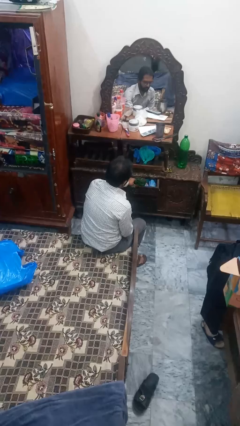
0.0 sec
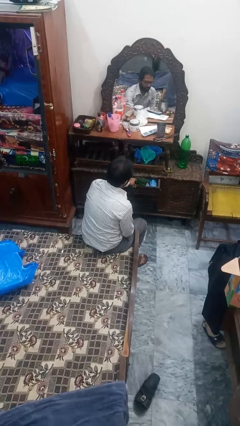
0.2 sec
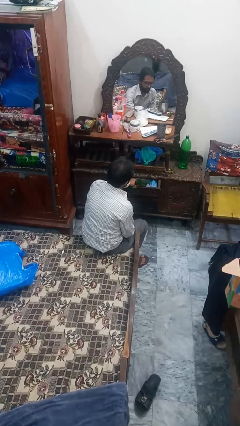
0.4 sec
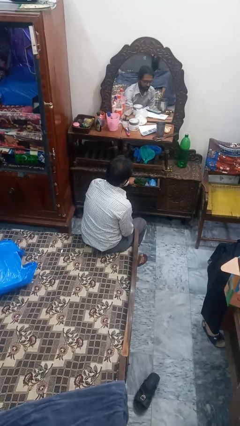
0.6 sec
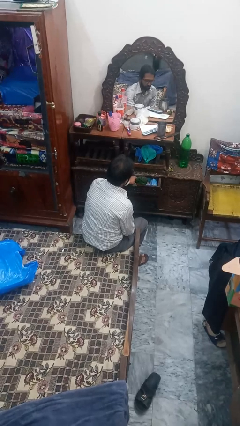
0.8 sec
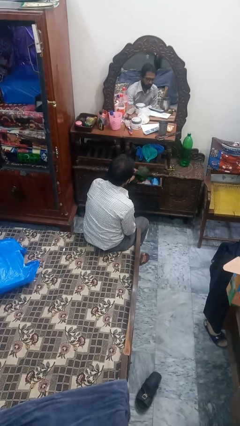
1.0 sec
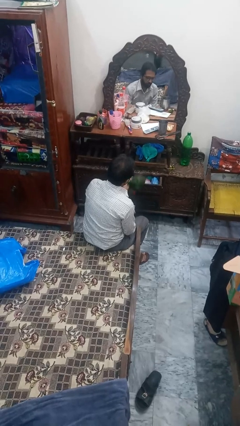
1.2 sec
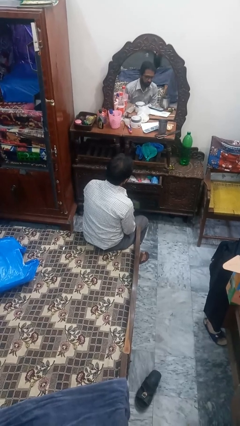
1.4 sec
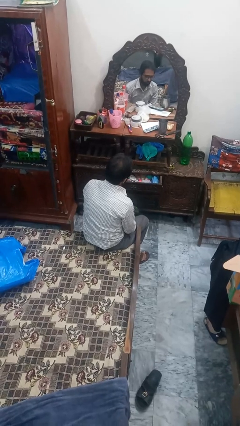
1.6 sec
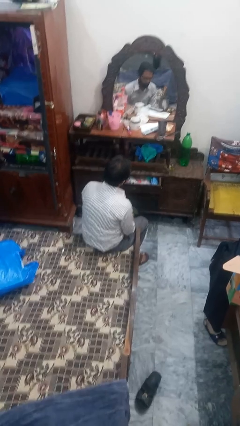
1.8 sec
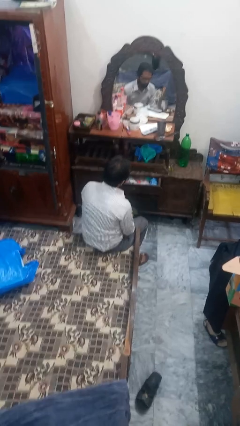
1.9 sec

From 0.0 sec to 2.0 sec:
person takes clothes from dresser

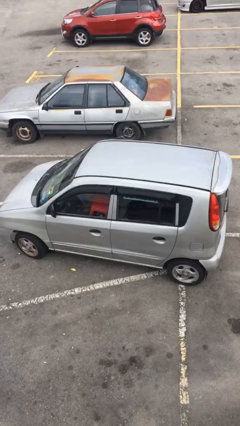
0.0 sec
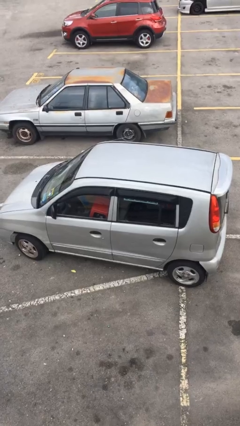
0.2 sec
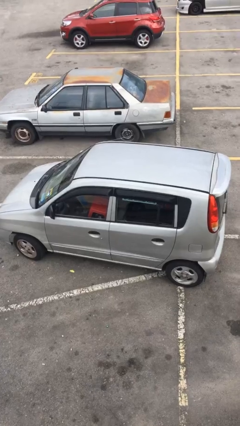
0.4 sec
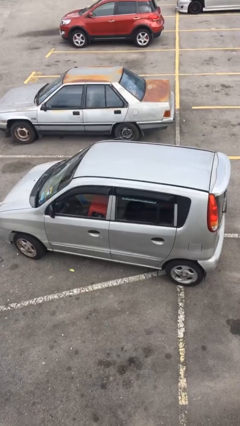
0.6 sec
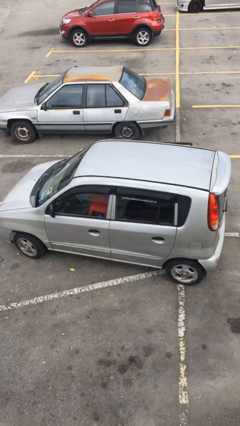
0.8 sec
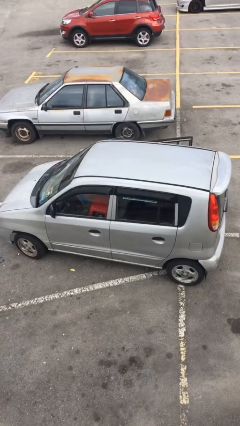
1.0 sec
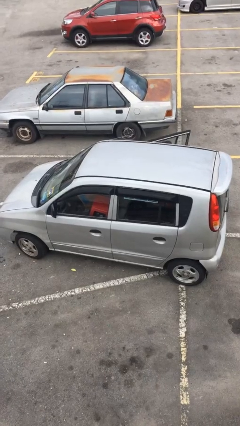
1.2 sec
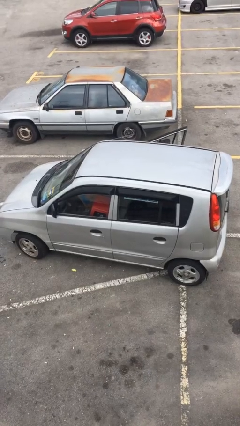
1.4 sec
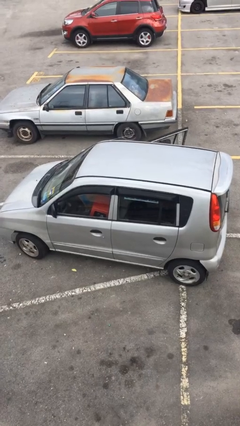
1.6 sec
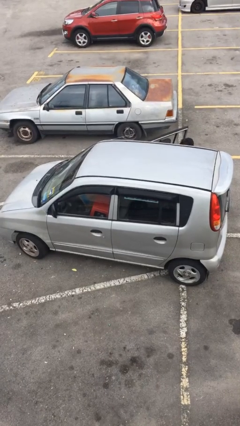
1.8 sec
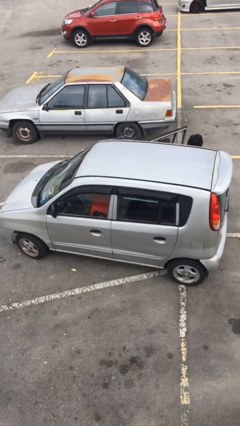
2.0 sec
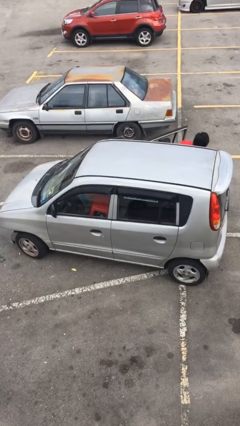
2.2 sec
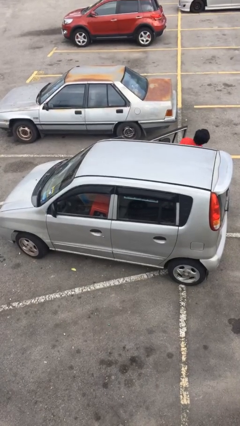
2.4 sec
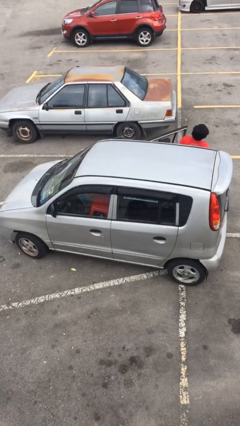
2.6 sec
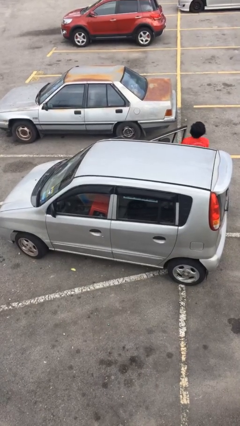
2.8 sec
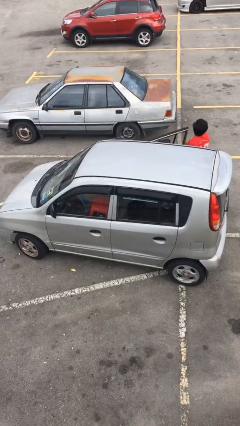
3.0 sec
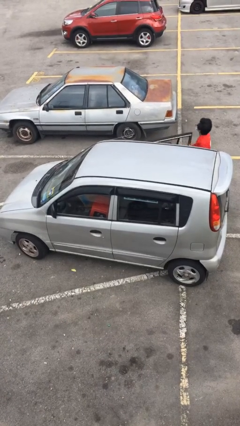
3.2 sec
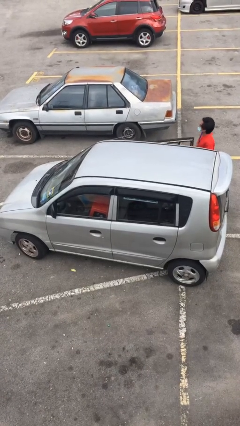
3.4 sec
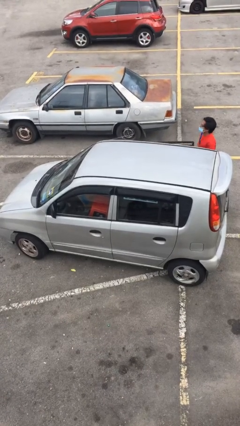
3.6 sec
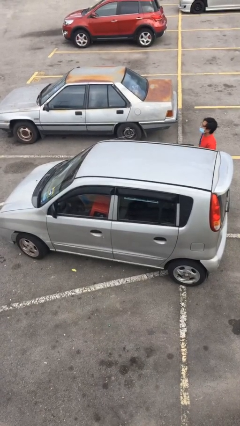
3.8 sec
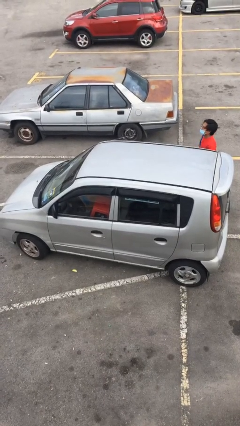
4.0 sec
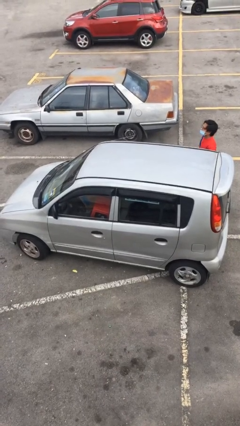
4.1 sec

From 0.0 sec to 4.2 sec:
car drops off person

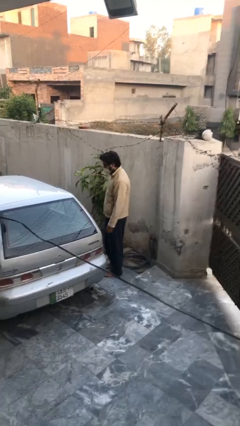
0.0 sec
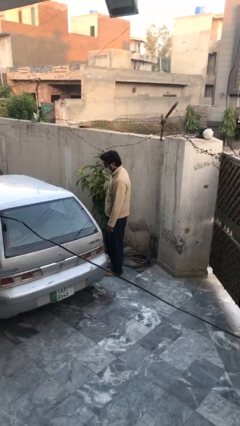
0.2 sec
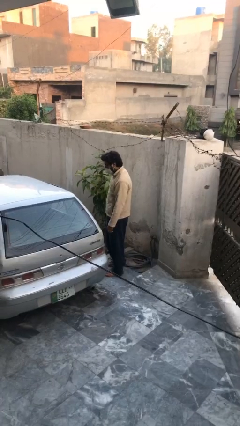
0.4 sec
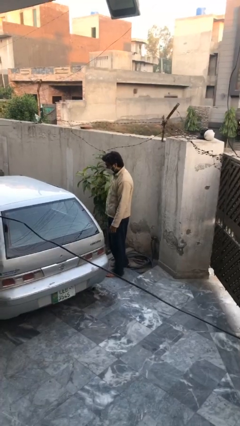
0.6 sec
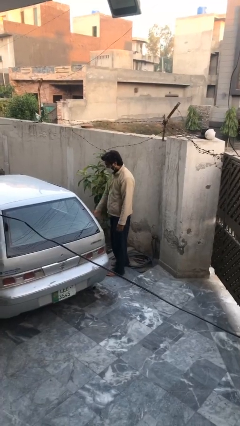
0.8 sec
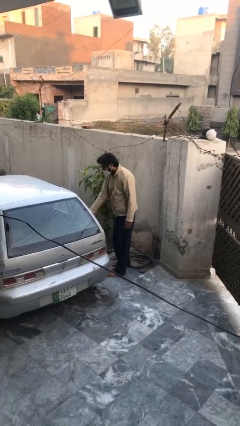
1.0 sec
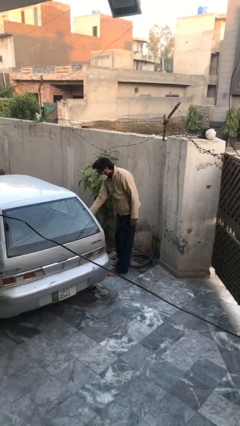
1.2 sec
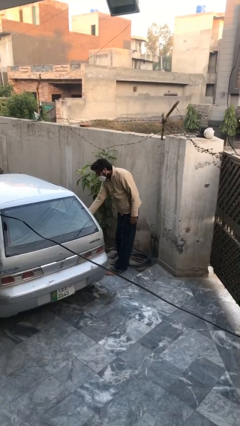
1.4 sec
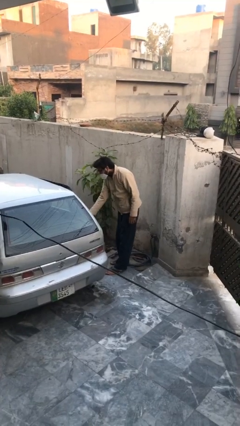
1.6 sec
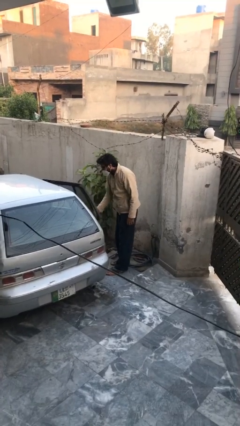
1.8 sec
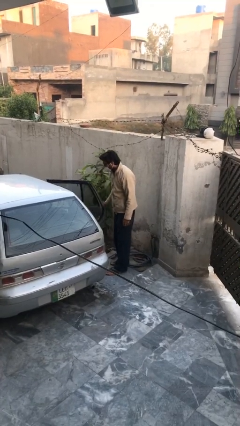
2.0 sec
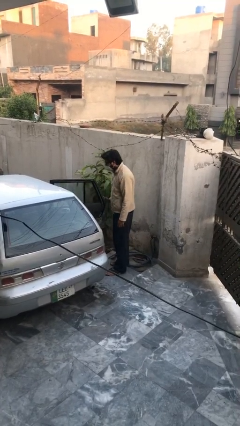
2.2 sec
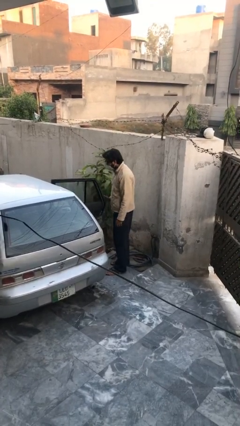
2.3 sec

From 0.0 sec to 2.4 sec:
person opens car door

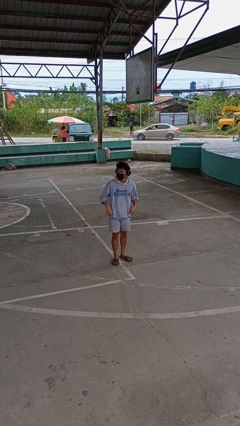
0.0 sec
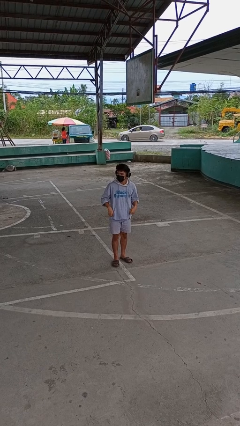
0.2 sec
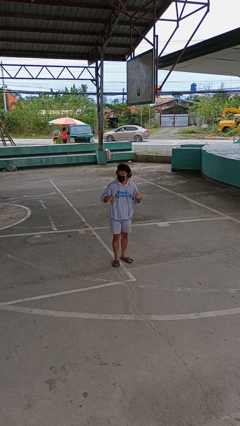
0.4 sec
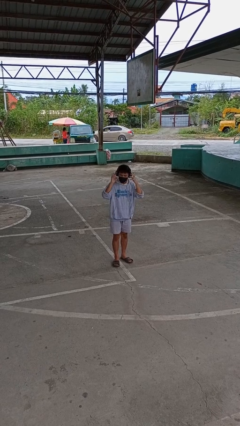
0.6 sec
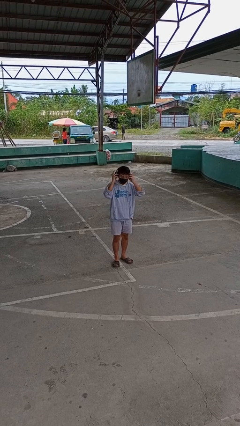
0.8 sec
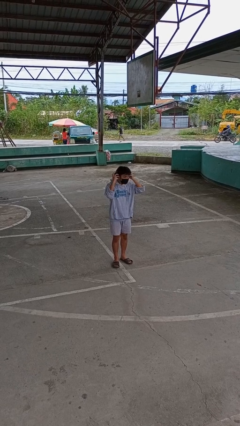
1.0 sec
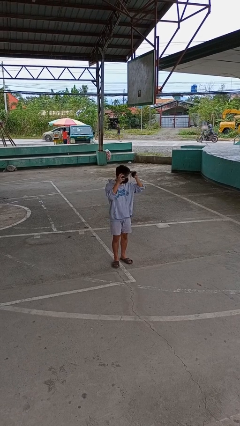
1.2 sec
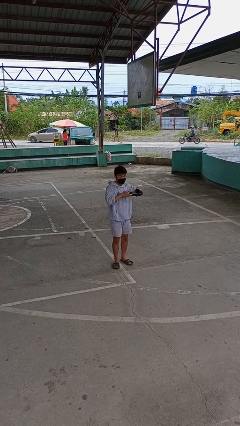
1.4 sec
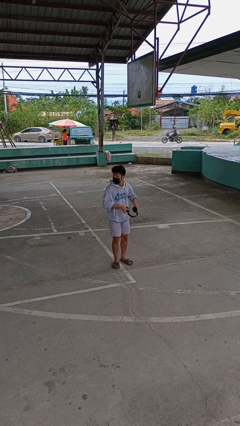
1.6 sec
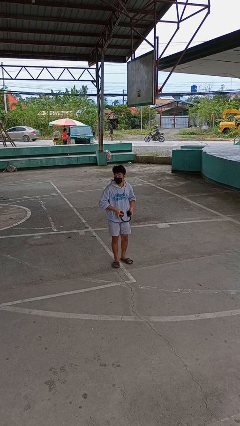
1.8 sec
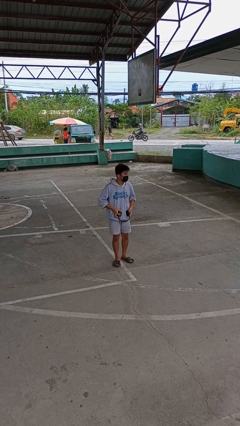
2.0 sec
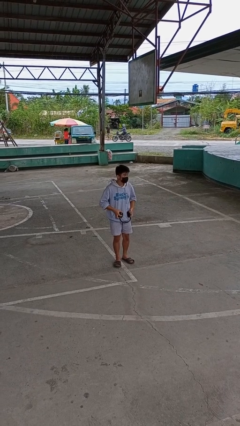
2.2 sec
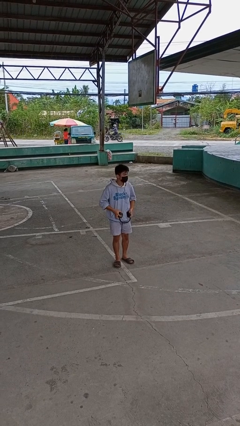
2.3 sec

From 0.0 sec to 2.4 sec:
person takes off headphones

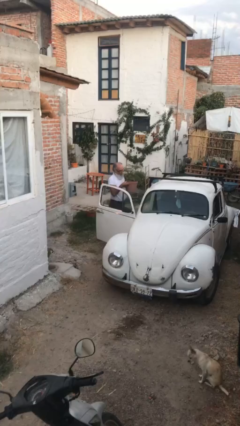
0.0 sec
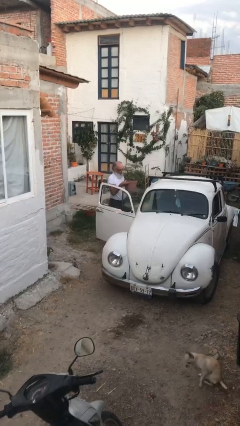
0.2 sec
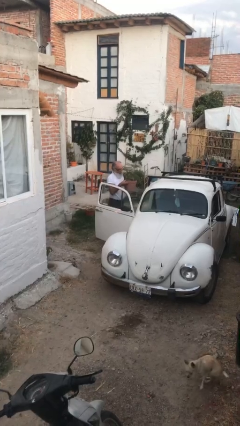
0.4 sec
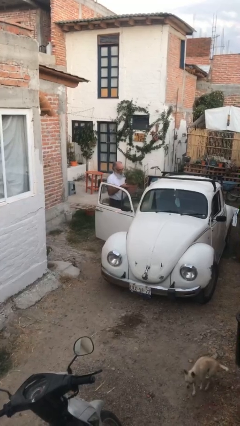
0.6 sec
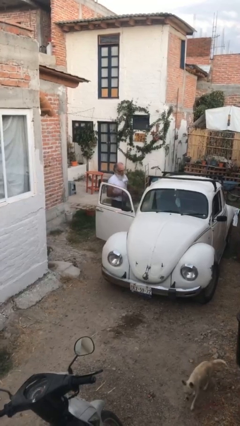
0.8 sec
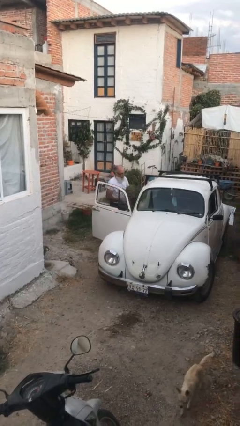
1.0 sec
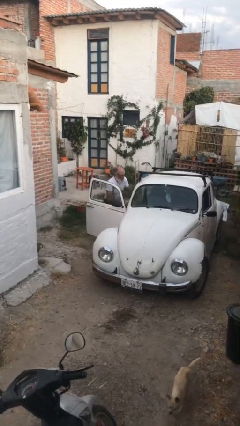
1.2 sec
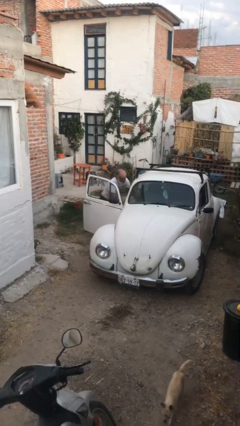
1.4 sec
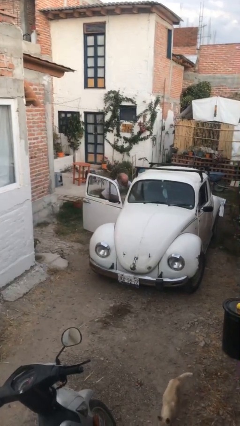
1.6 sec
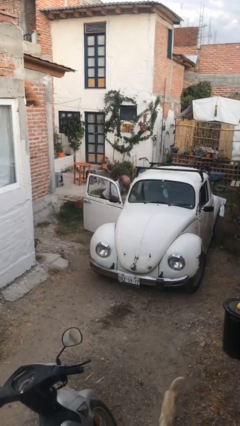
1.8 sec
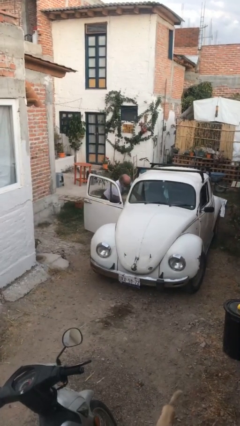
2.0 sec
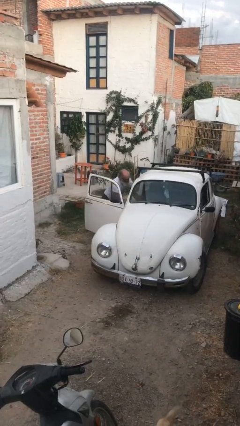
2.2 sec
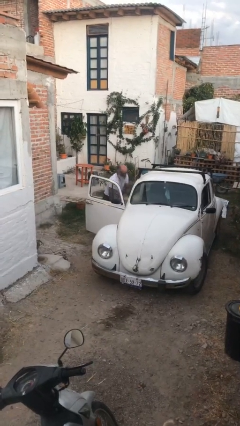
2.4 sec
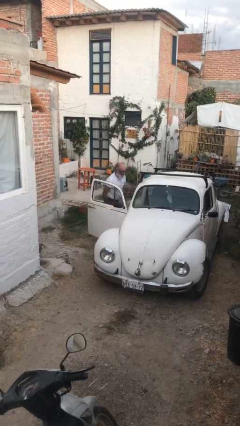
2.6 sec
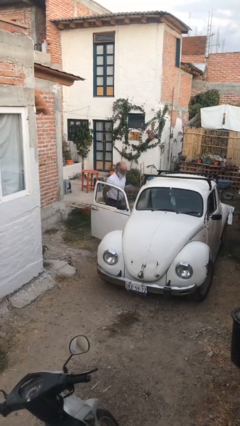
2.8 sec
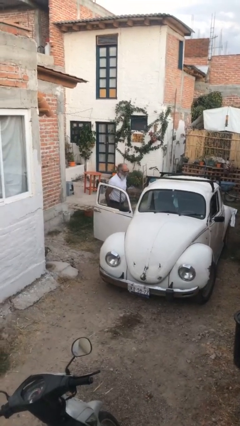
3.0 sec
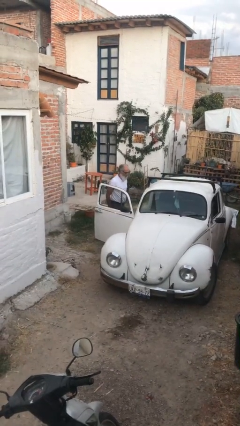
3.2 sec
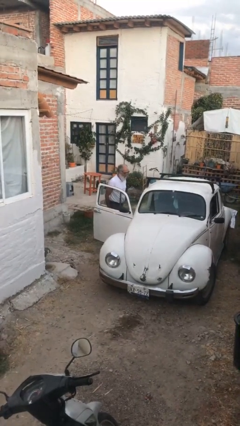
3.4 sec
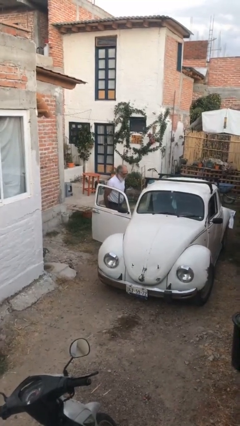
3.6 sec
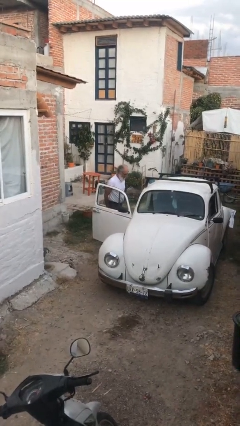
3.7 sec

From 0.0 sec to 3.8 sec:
person loads car

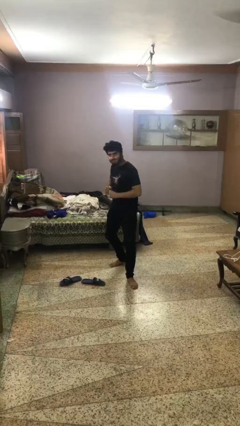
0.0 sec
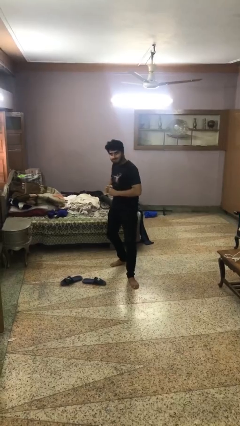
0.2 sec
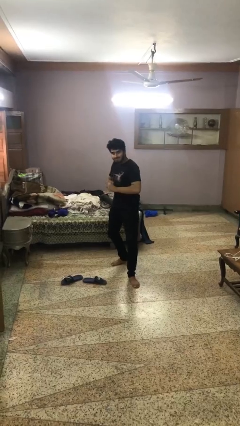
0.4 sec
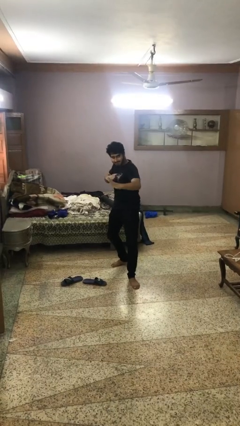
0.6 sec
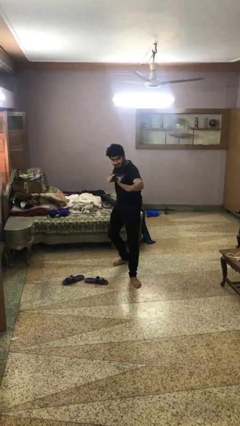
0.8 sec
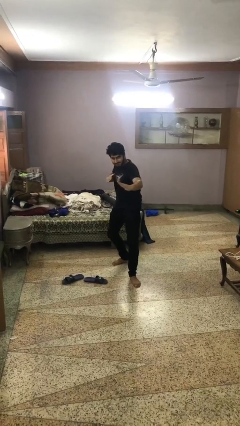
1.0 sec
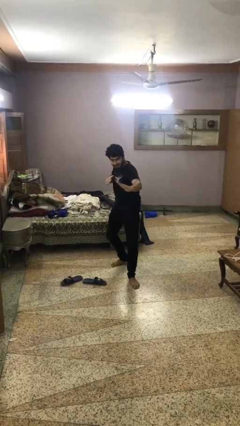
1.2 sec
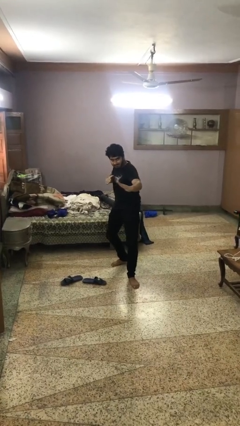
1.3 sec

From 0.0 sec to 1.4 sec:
person karate chop

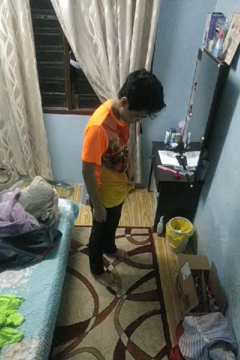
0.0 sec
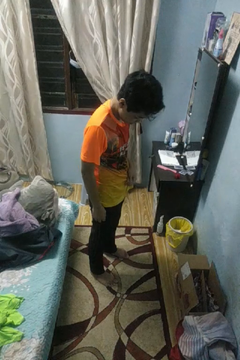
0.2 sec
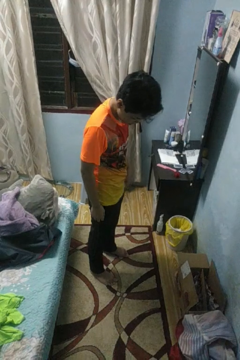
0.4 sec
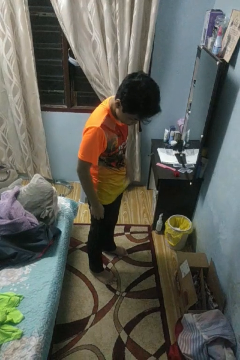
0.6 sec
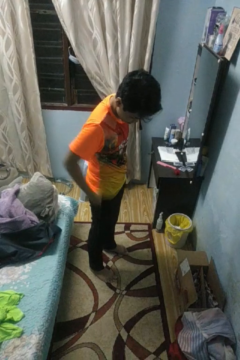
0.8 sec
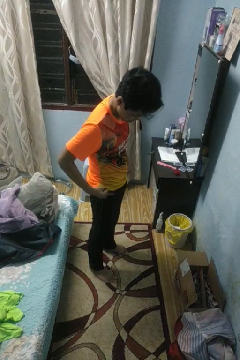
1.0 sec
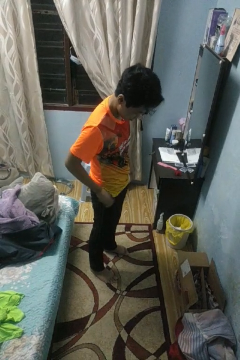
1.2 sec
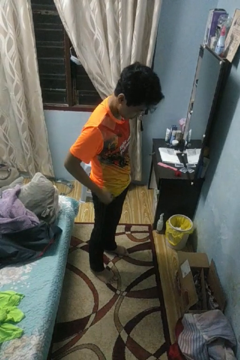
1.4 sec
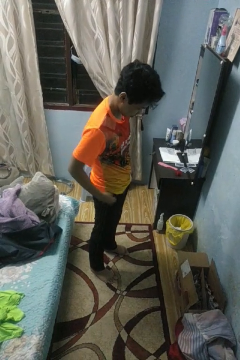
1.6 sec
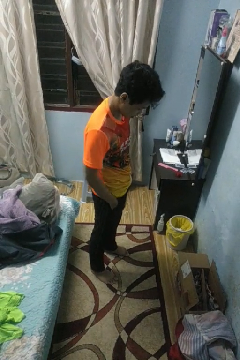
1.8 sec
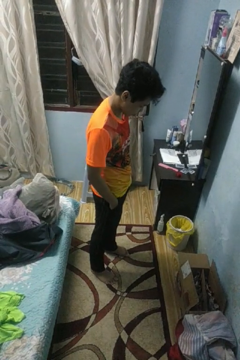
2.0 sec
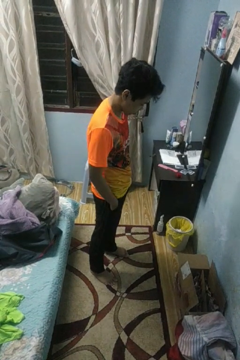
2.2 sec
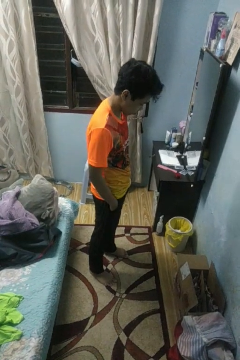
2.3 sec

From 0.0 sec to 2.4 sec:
person puts hands in back pockets
